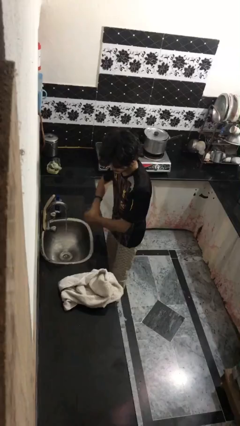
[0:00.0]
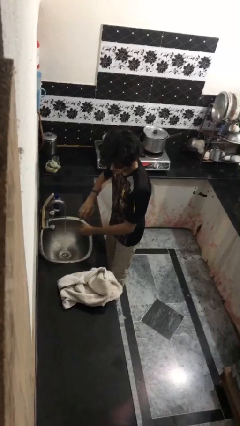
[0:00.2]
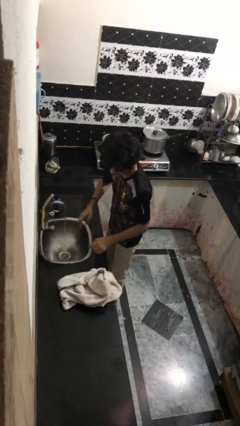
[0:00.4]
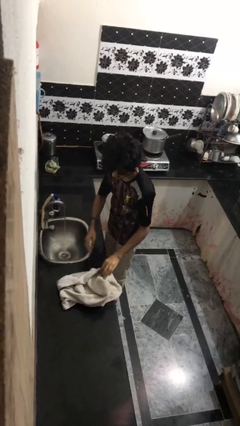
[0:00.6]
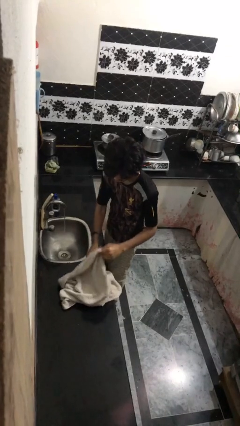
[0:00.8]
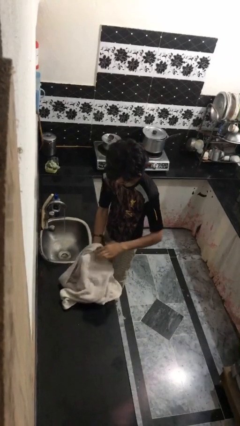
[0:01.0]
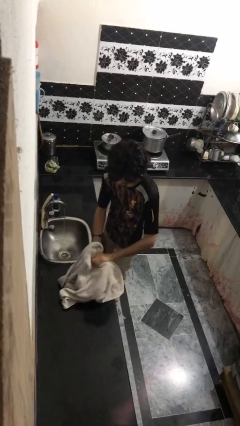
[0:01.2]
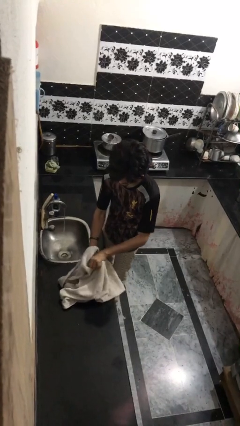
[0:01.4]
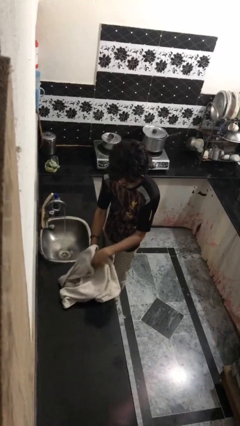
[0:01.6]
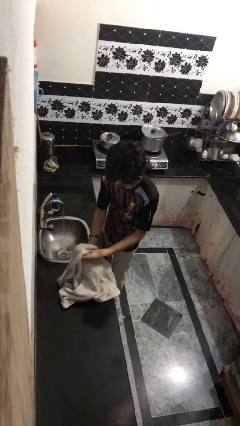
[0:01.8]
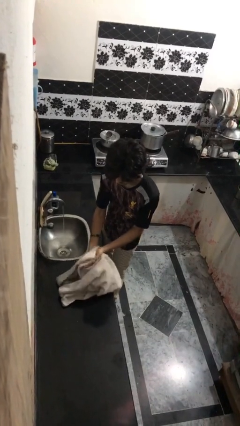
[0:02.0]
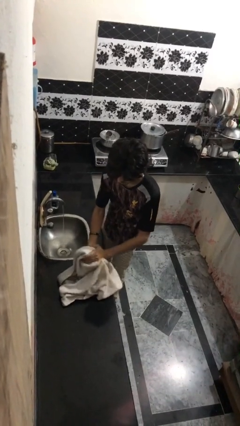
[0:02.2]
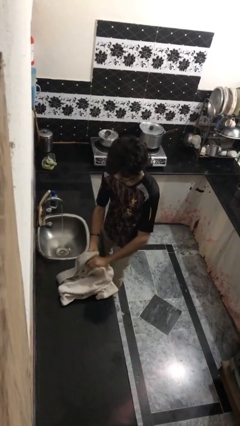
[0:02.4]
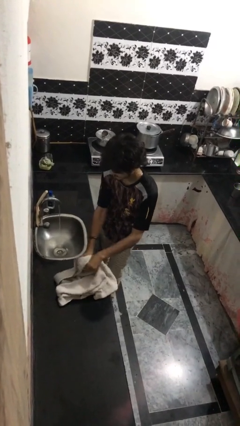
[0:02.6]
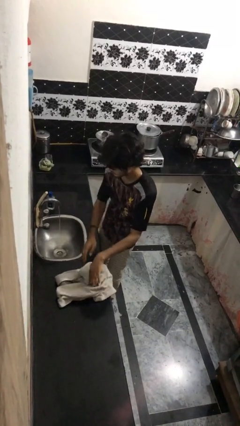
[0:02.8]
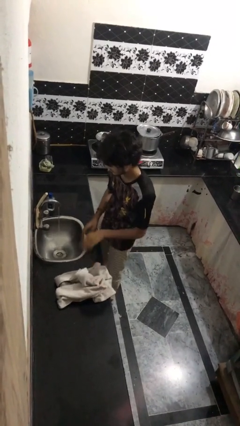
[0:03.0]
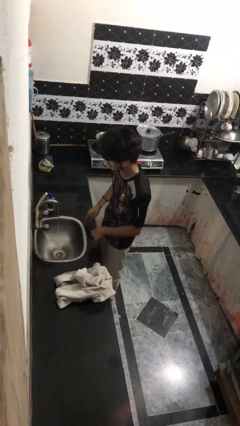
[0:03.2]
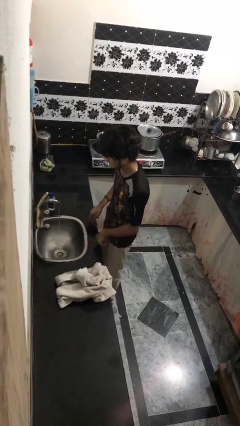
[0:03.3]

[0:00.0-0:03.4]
person dries hands with towel

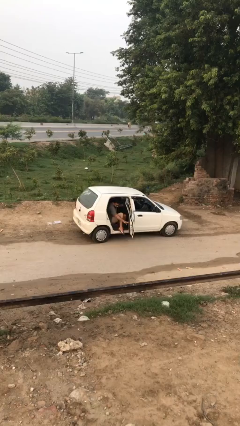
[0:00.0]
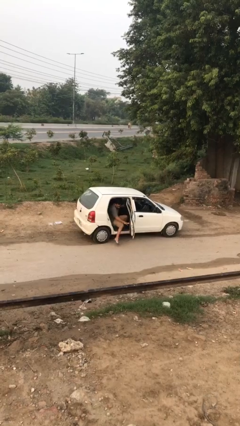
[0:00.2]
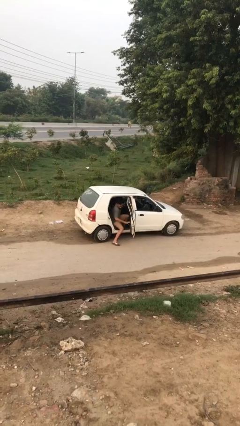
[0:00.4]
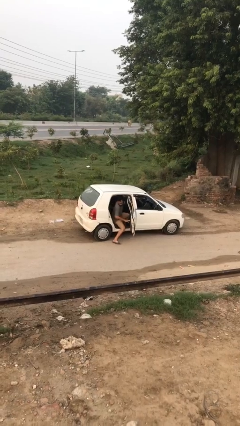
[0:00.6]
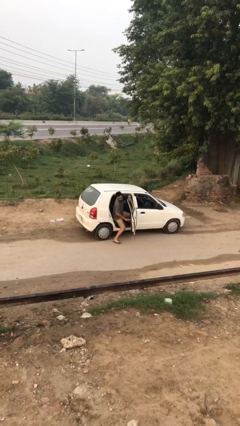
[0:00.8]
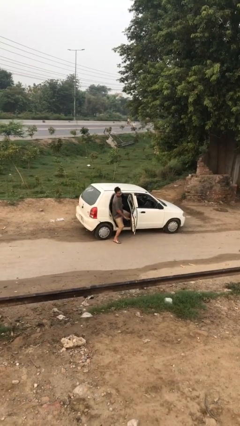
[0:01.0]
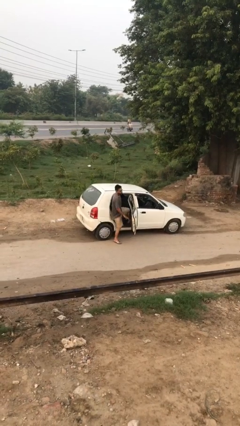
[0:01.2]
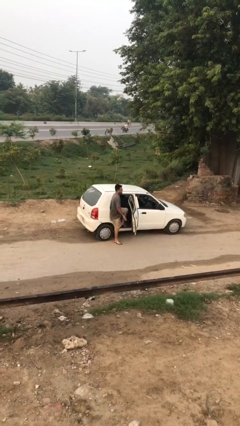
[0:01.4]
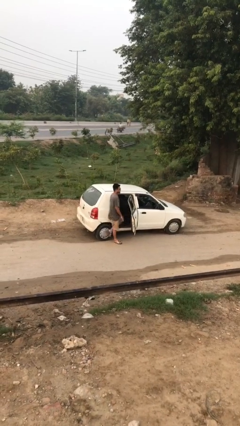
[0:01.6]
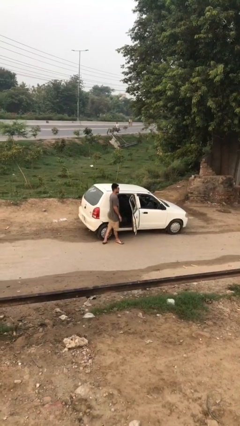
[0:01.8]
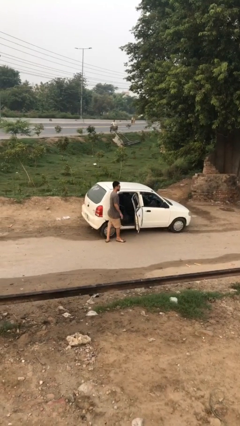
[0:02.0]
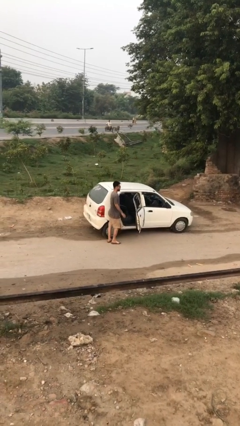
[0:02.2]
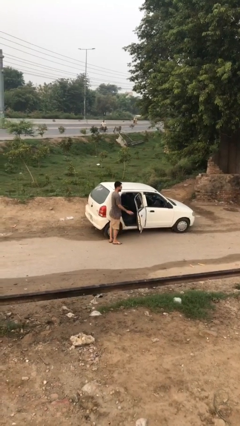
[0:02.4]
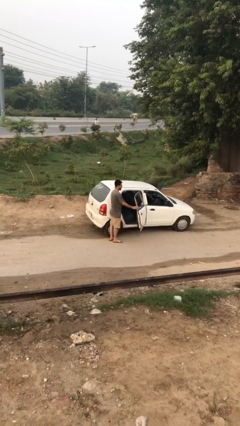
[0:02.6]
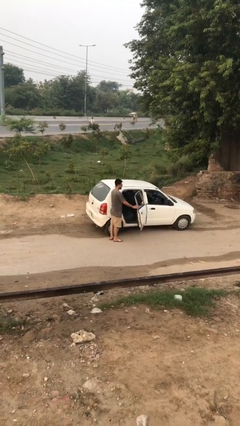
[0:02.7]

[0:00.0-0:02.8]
person exits car

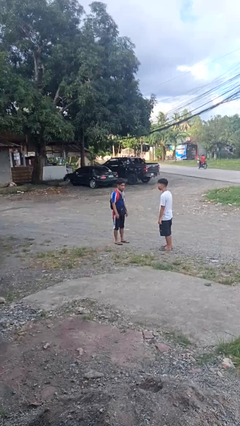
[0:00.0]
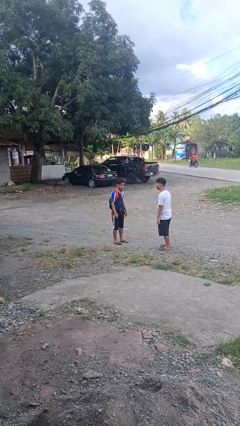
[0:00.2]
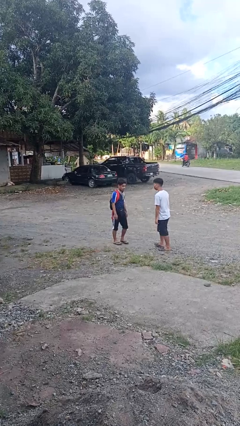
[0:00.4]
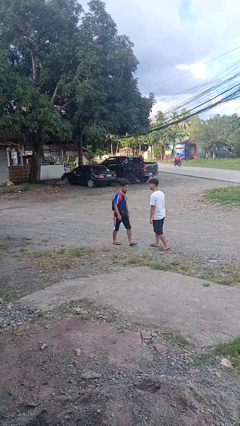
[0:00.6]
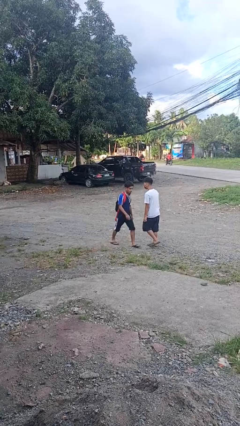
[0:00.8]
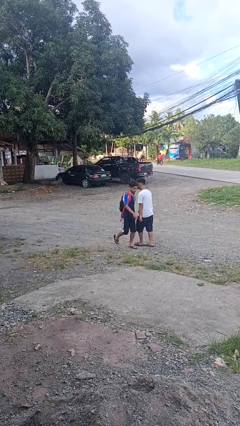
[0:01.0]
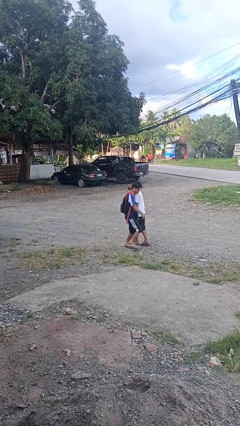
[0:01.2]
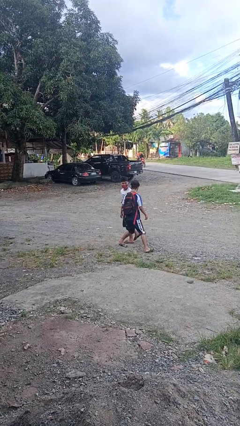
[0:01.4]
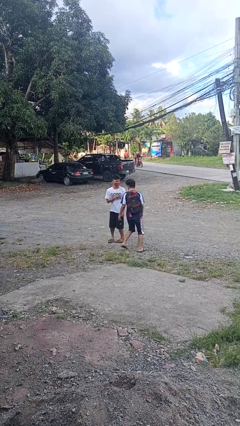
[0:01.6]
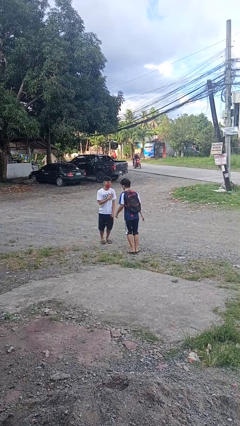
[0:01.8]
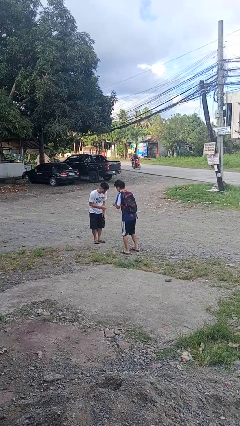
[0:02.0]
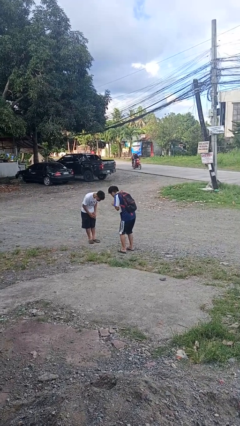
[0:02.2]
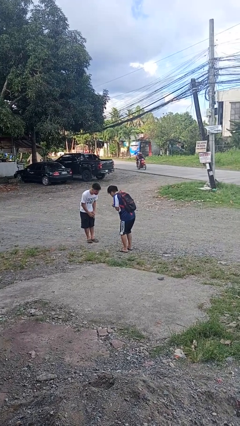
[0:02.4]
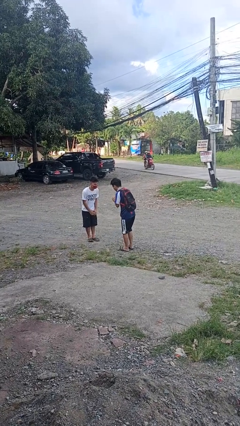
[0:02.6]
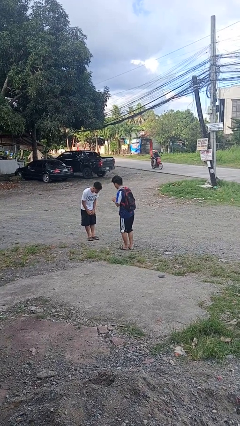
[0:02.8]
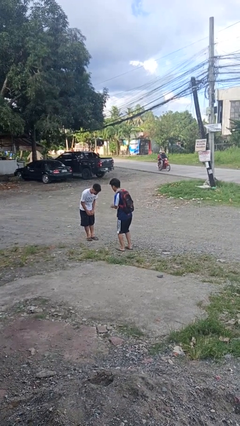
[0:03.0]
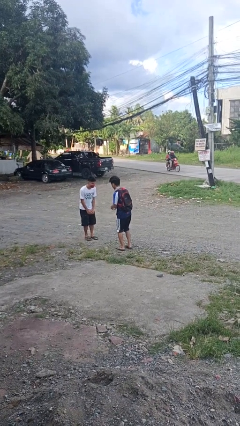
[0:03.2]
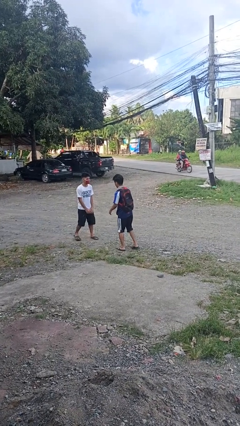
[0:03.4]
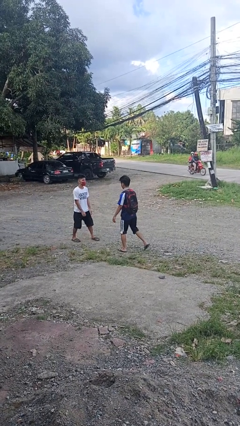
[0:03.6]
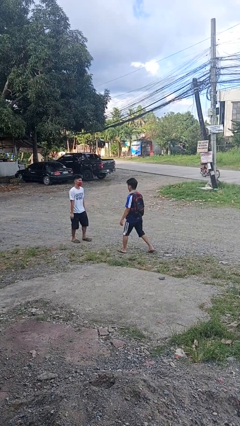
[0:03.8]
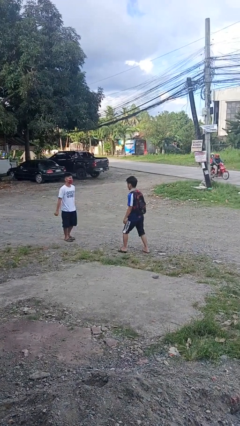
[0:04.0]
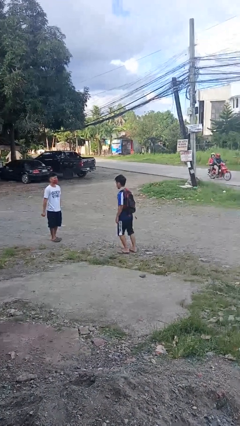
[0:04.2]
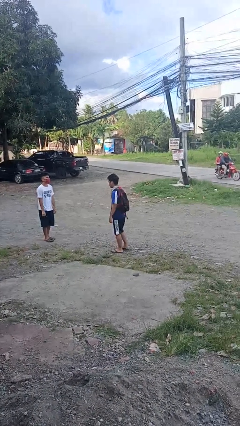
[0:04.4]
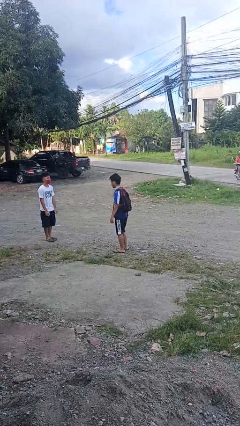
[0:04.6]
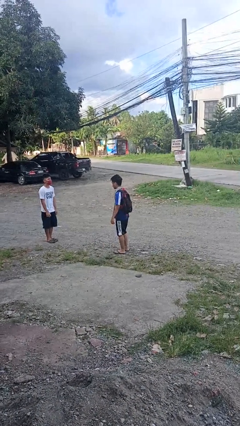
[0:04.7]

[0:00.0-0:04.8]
person bumps into person

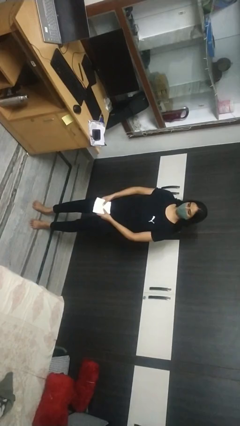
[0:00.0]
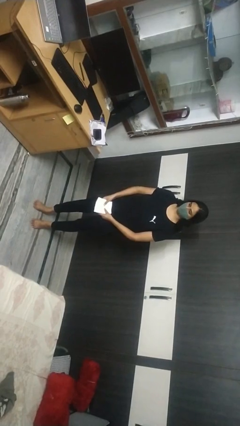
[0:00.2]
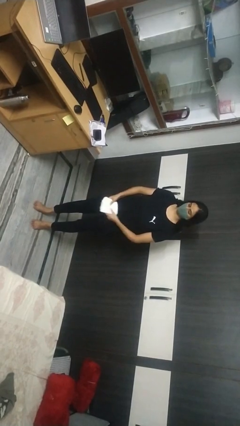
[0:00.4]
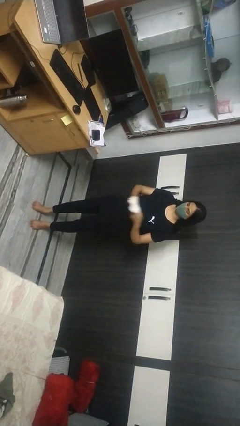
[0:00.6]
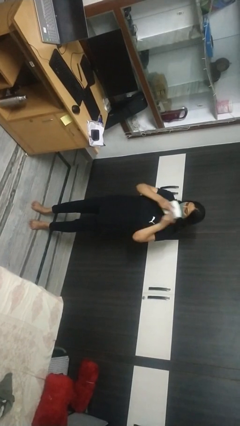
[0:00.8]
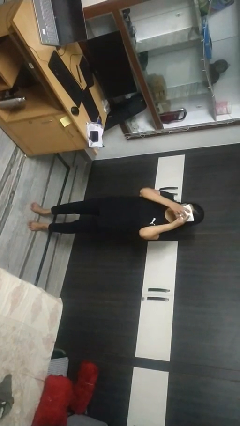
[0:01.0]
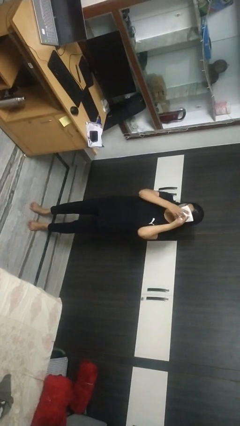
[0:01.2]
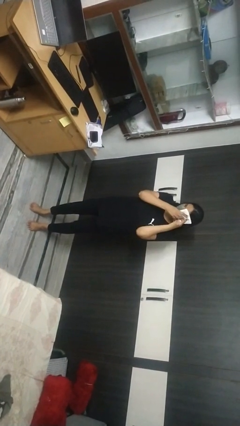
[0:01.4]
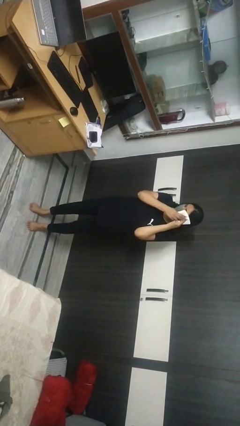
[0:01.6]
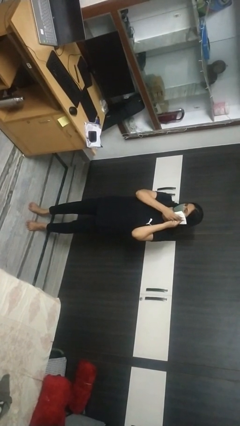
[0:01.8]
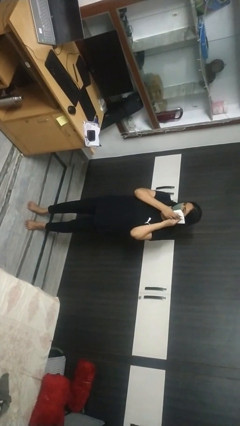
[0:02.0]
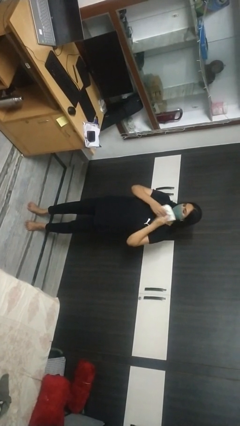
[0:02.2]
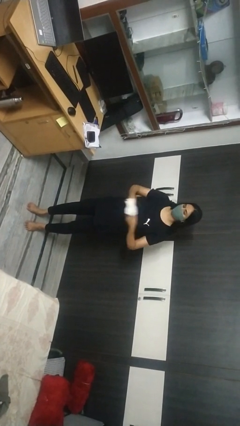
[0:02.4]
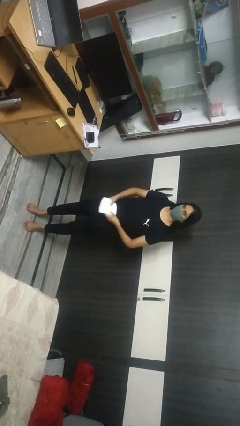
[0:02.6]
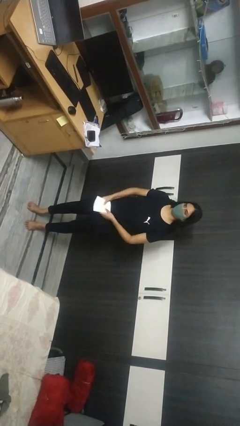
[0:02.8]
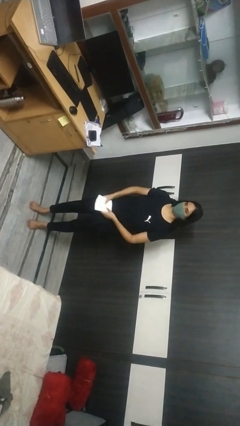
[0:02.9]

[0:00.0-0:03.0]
person wipes mouth with napkin

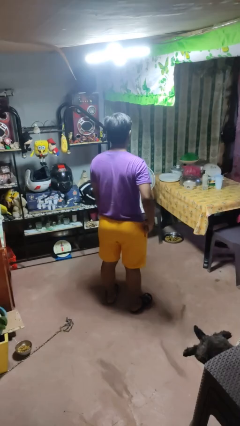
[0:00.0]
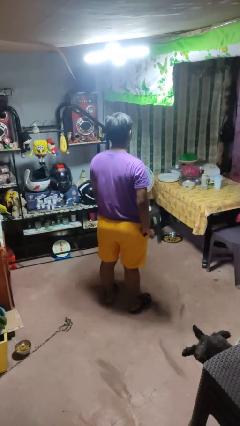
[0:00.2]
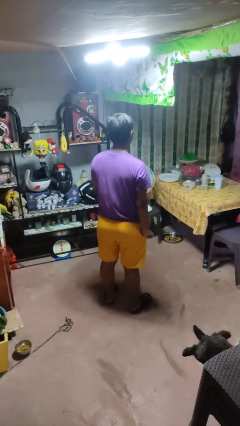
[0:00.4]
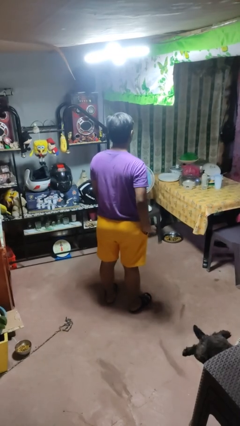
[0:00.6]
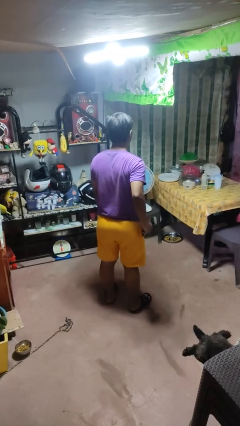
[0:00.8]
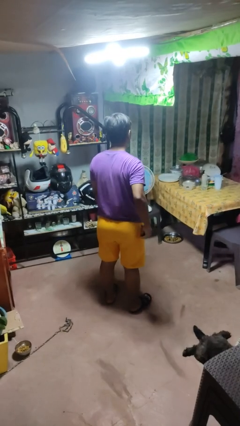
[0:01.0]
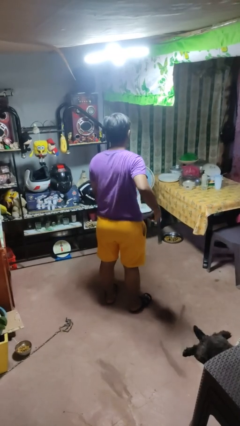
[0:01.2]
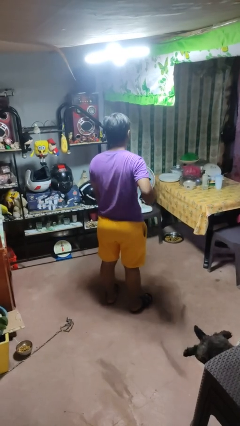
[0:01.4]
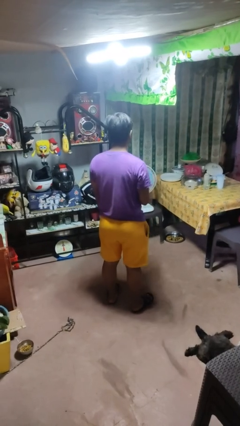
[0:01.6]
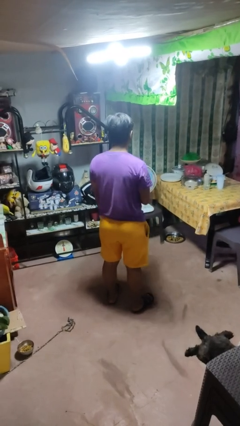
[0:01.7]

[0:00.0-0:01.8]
person takes phone from pocket

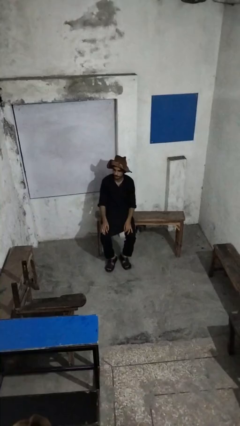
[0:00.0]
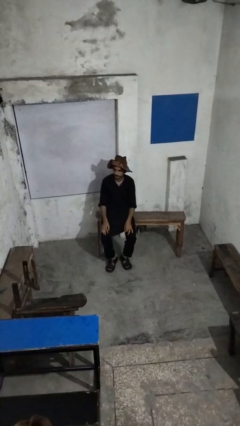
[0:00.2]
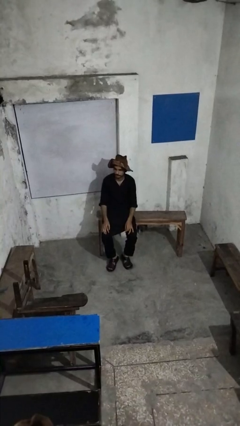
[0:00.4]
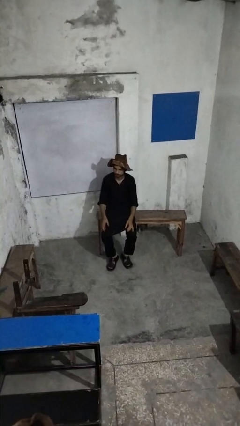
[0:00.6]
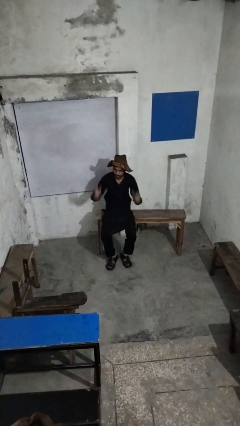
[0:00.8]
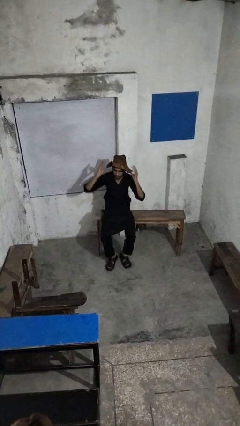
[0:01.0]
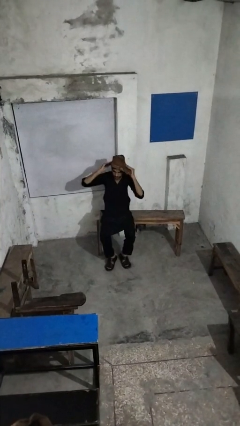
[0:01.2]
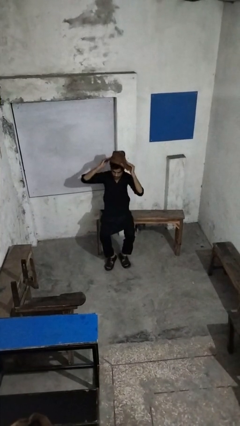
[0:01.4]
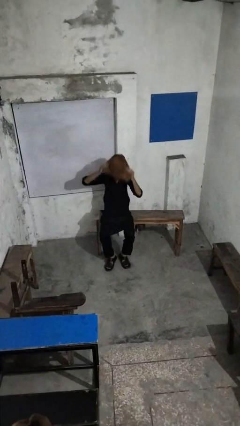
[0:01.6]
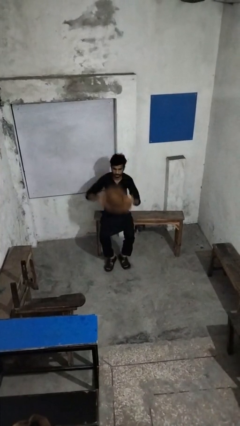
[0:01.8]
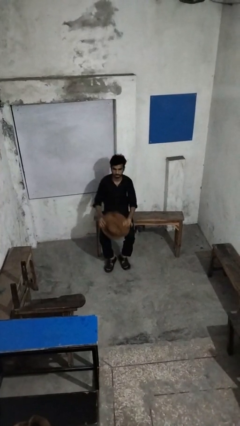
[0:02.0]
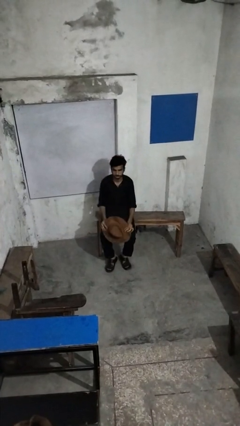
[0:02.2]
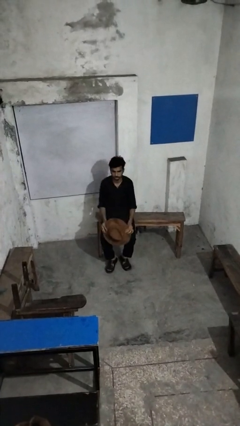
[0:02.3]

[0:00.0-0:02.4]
person takes off hat
